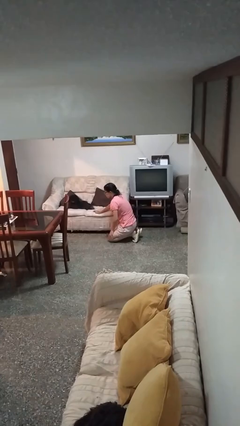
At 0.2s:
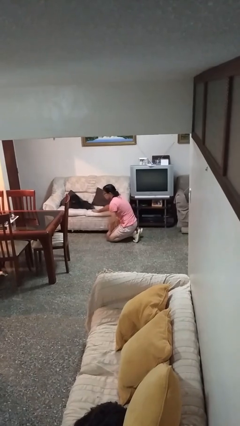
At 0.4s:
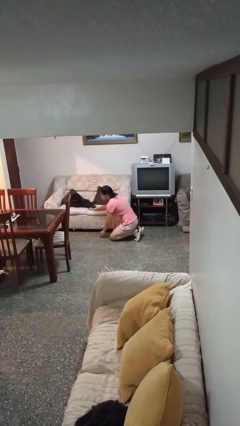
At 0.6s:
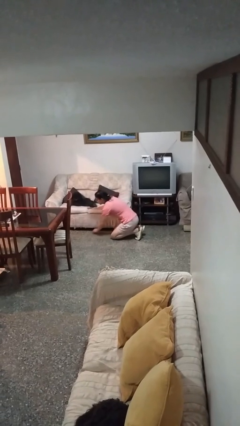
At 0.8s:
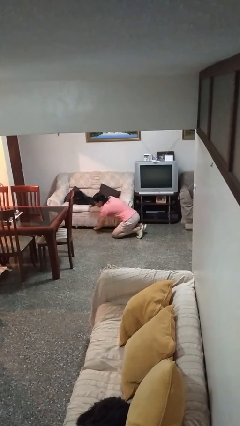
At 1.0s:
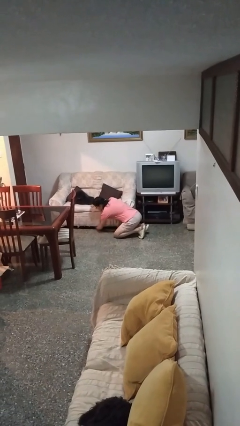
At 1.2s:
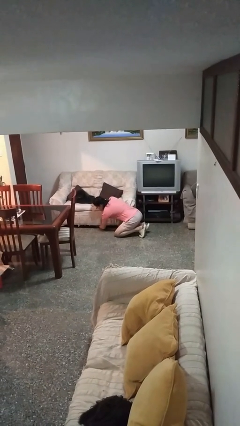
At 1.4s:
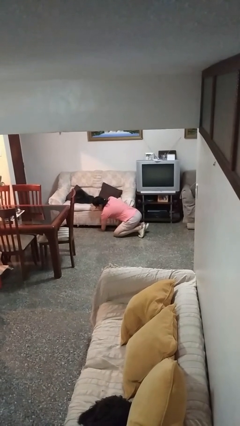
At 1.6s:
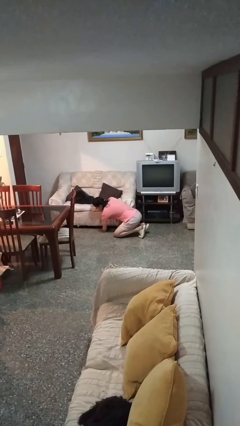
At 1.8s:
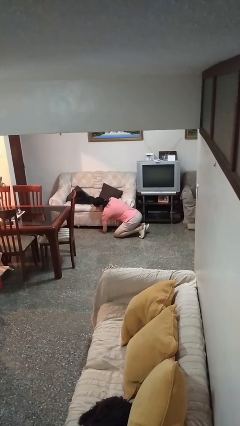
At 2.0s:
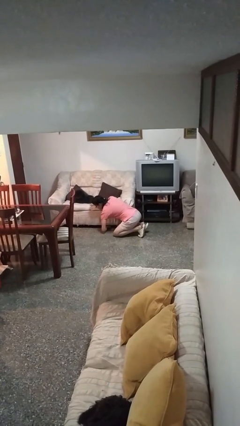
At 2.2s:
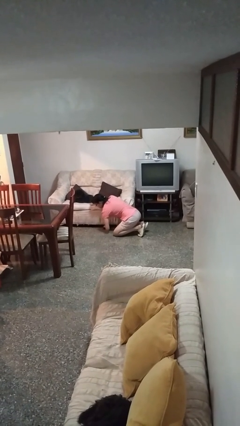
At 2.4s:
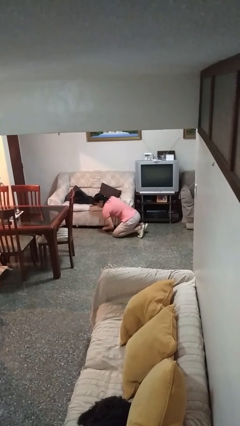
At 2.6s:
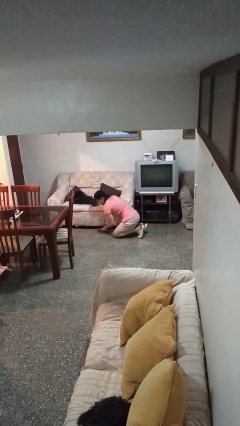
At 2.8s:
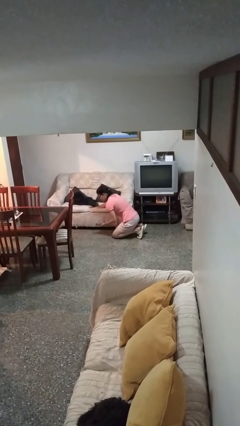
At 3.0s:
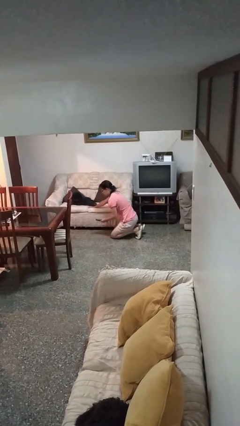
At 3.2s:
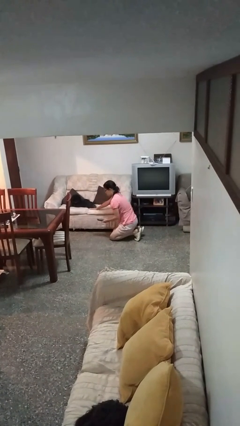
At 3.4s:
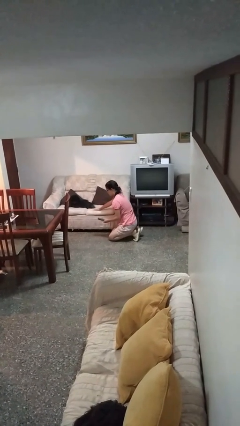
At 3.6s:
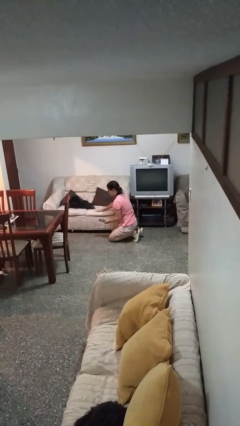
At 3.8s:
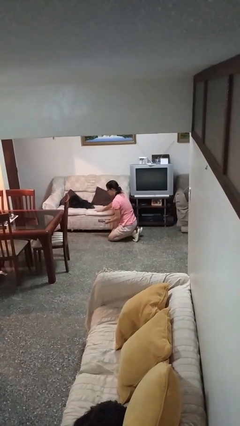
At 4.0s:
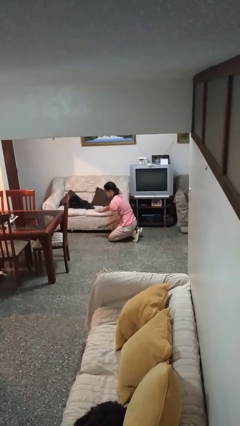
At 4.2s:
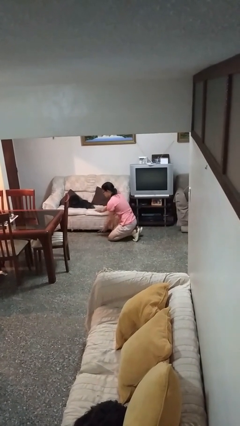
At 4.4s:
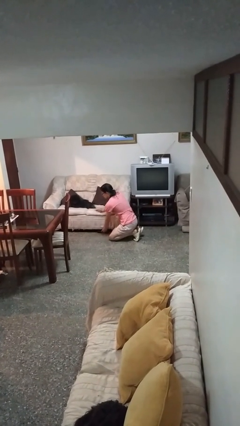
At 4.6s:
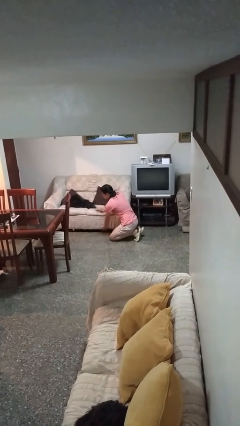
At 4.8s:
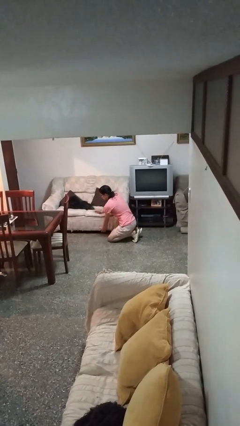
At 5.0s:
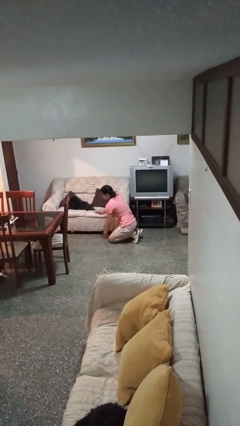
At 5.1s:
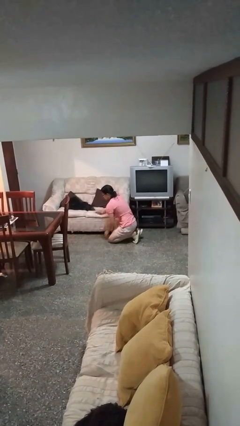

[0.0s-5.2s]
person searches under couch

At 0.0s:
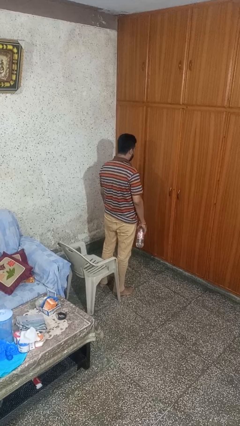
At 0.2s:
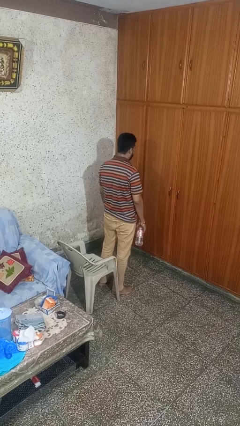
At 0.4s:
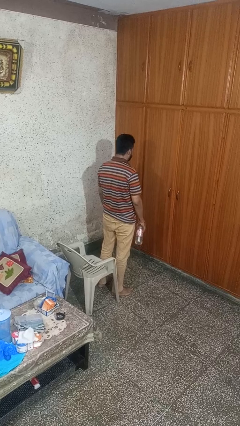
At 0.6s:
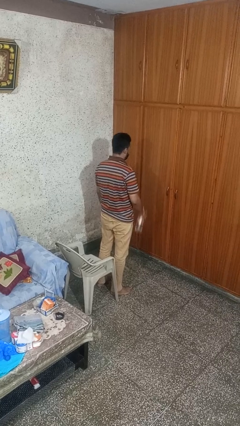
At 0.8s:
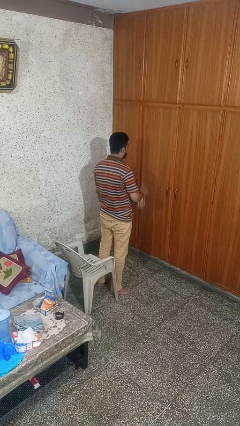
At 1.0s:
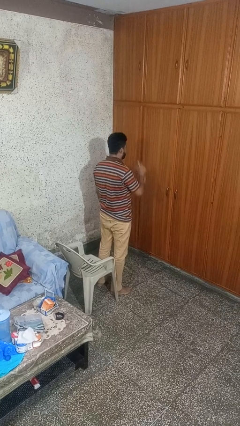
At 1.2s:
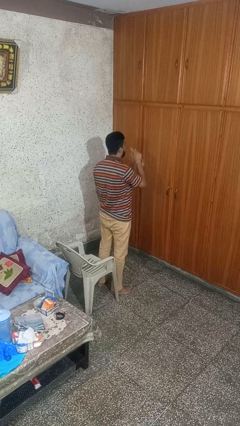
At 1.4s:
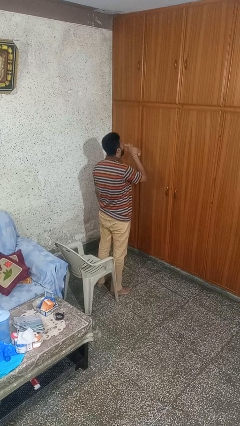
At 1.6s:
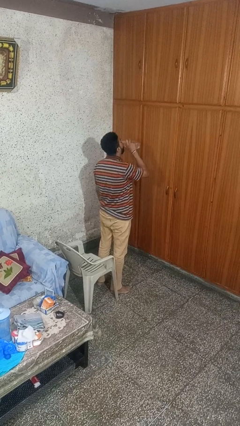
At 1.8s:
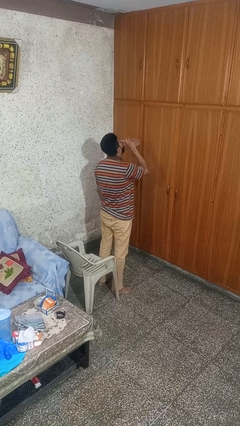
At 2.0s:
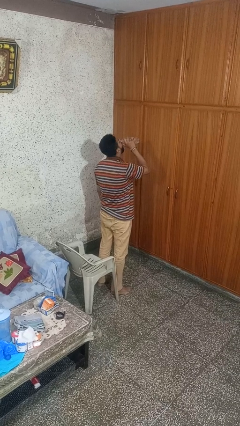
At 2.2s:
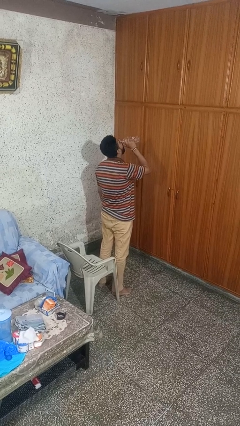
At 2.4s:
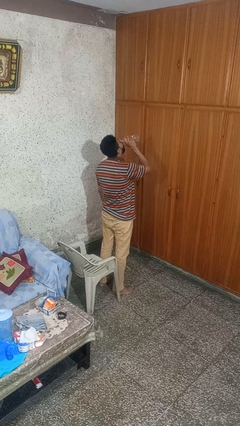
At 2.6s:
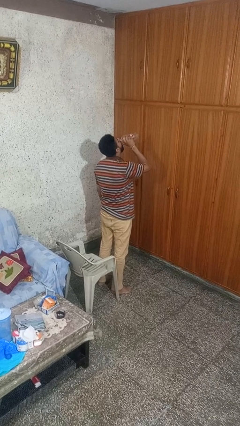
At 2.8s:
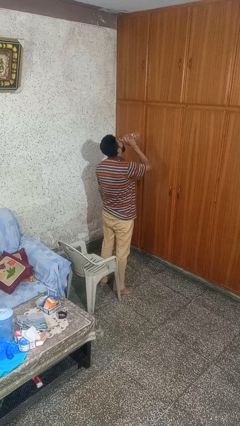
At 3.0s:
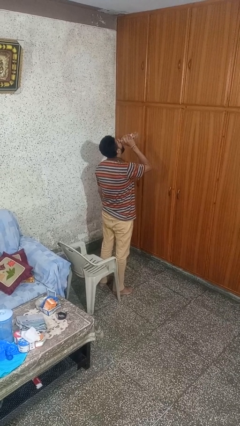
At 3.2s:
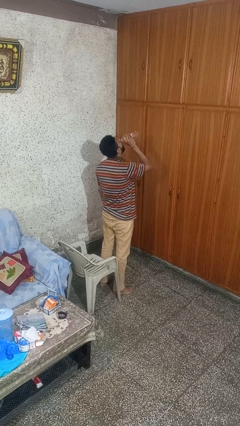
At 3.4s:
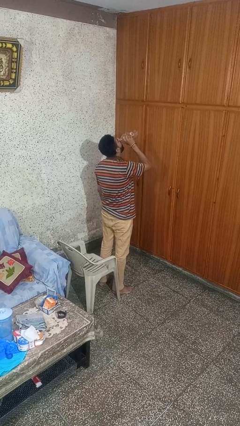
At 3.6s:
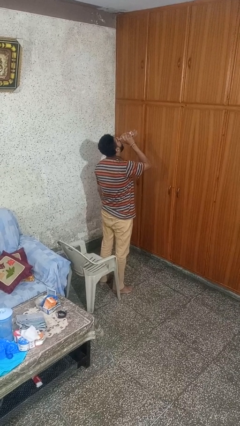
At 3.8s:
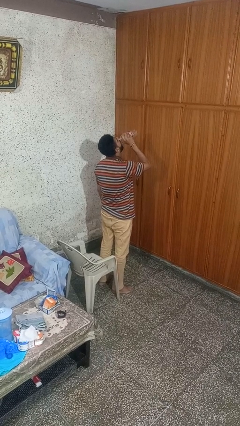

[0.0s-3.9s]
person drinks from bottle

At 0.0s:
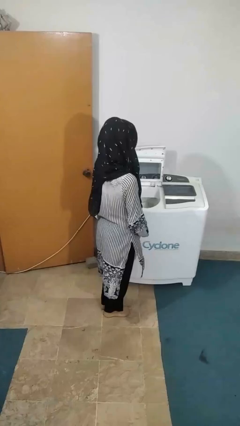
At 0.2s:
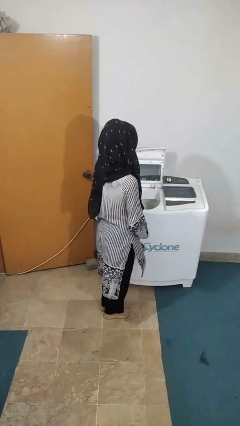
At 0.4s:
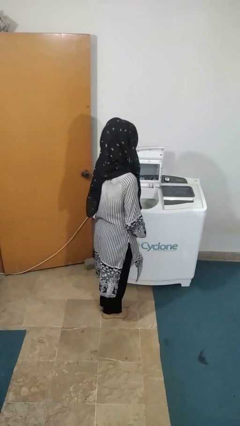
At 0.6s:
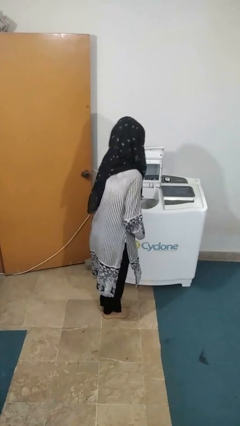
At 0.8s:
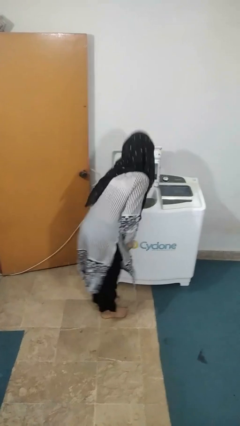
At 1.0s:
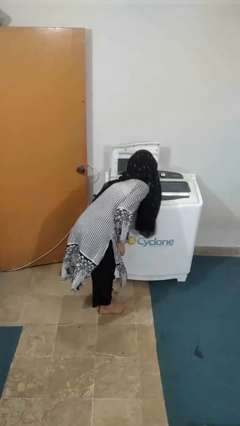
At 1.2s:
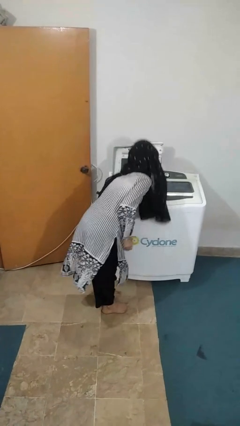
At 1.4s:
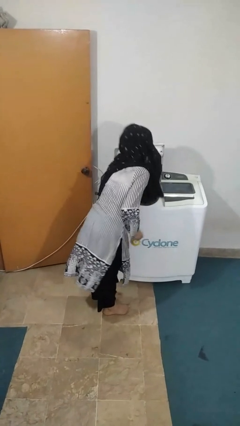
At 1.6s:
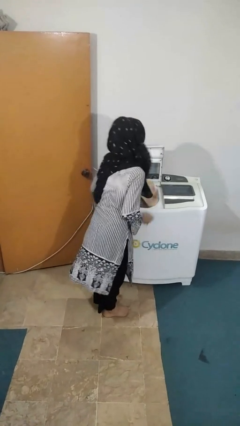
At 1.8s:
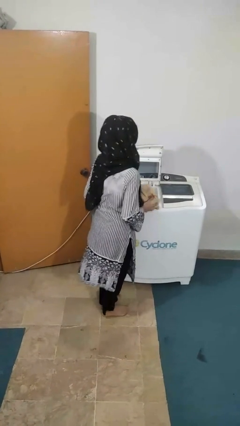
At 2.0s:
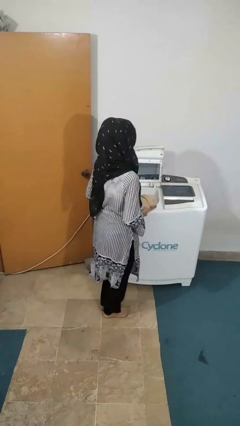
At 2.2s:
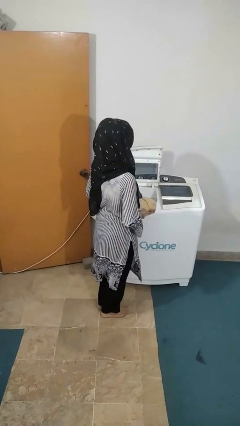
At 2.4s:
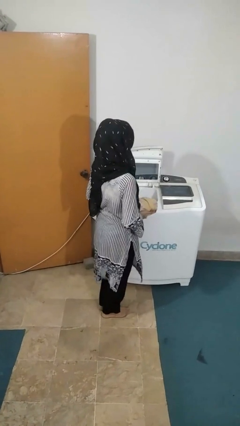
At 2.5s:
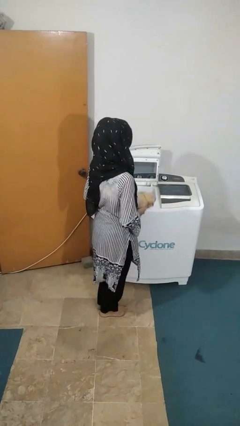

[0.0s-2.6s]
person unloads clotheswasher

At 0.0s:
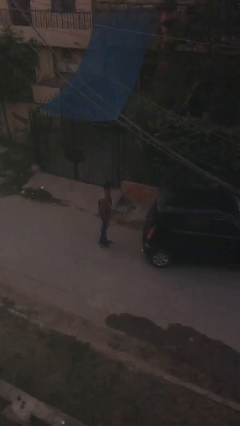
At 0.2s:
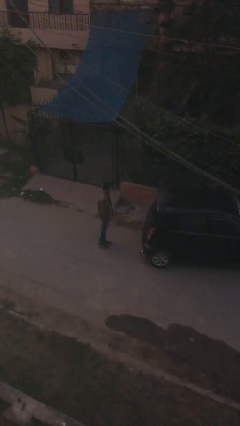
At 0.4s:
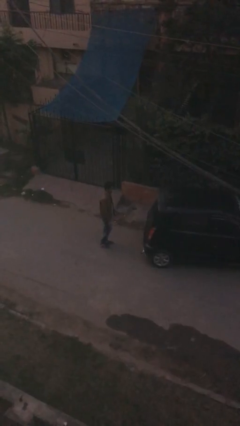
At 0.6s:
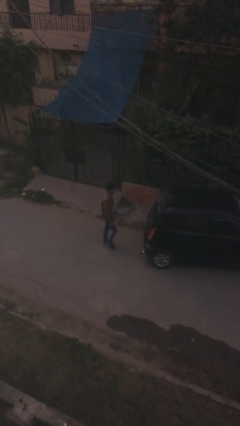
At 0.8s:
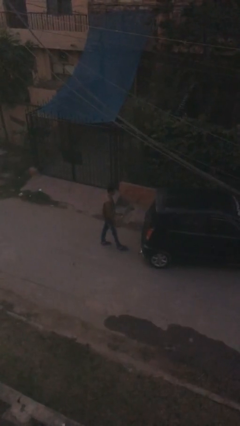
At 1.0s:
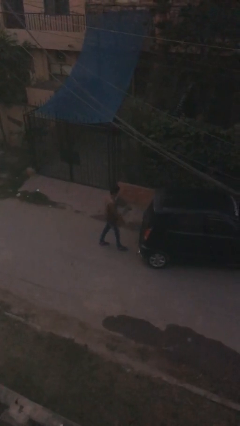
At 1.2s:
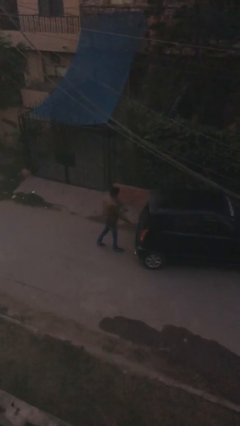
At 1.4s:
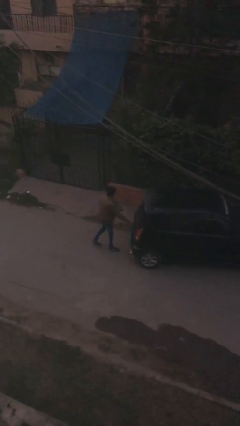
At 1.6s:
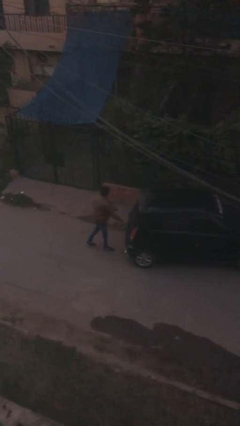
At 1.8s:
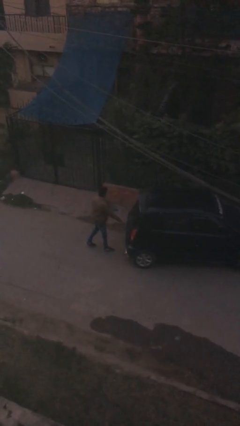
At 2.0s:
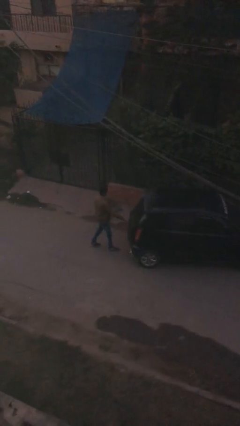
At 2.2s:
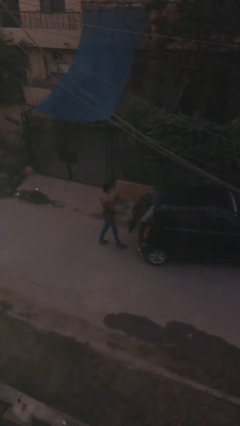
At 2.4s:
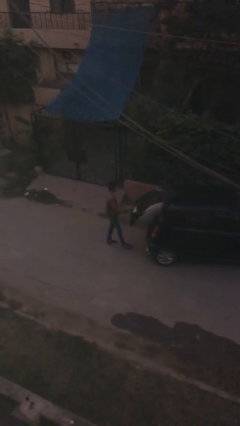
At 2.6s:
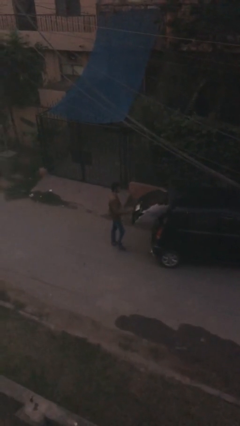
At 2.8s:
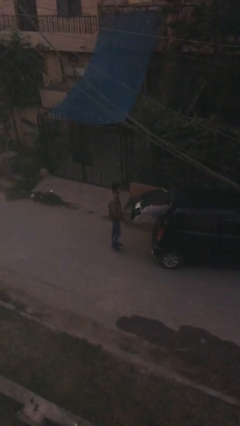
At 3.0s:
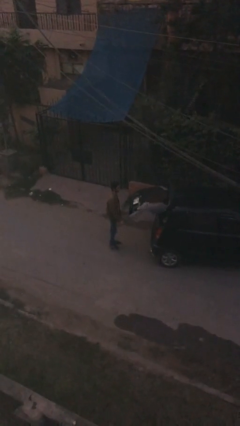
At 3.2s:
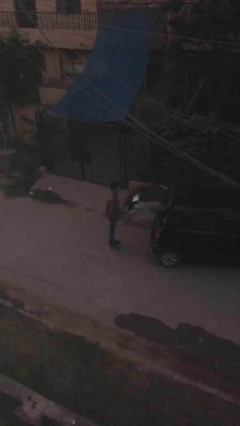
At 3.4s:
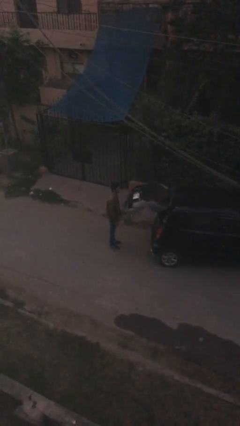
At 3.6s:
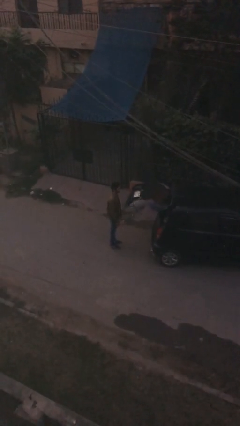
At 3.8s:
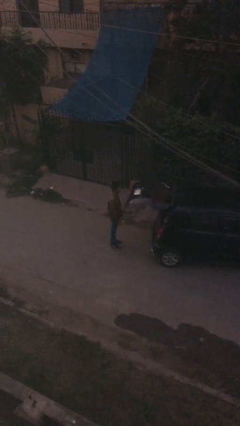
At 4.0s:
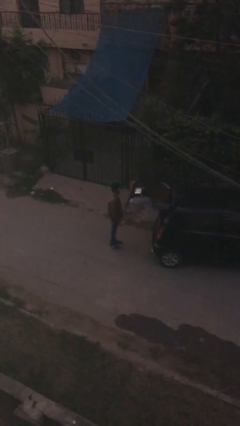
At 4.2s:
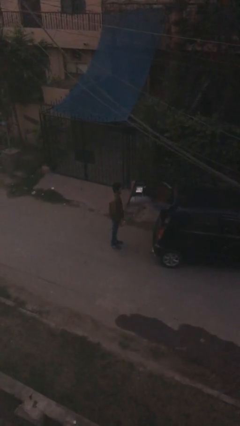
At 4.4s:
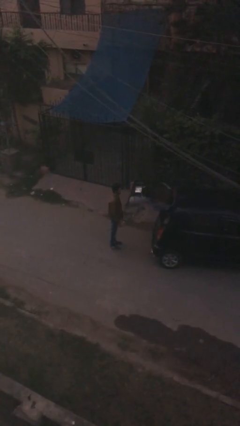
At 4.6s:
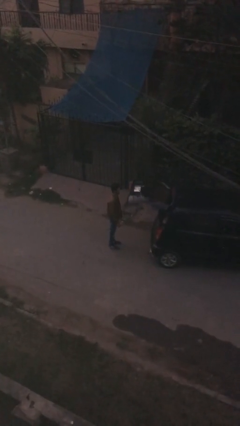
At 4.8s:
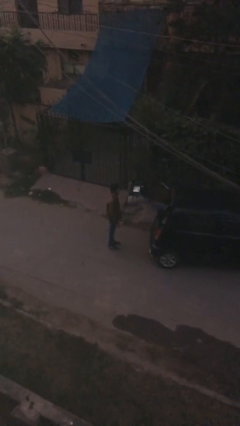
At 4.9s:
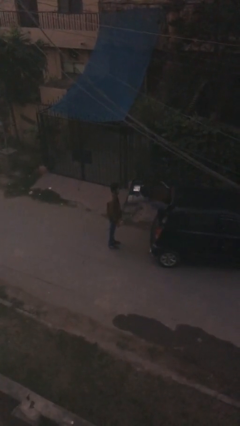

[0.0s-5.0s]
person opens car trunk

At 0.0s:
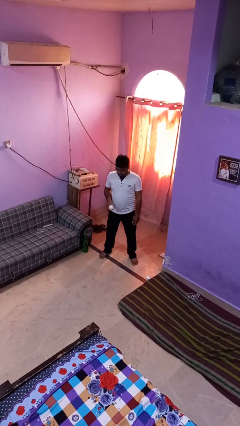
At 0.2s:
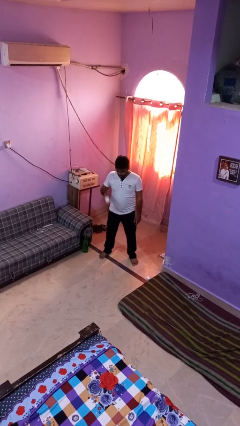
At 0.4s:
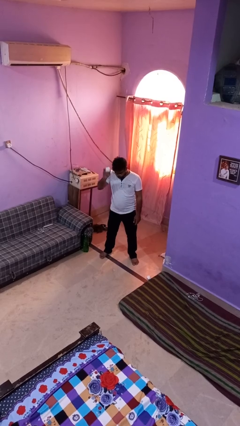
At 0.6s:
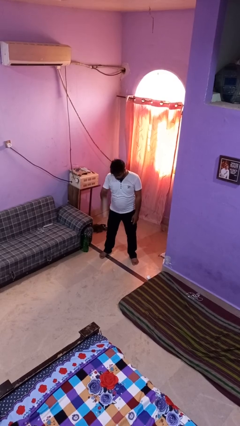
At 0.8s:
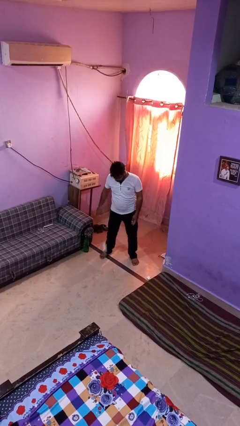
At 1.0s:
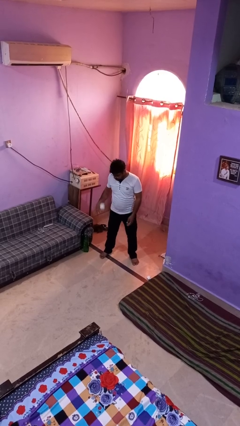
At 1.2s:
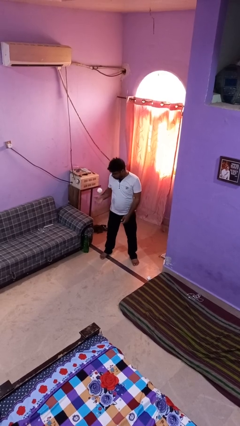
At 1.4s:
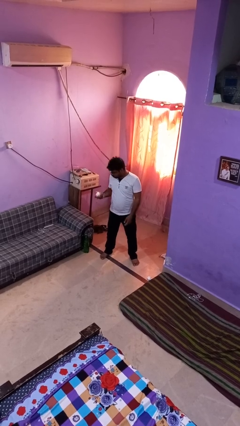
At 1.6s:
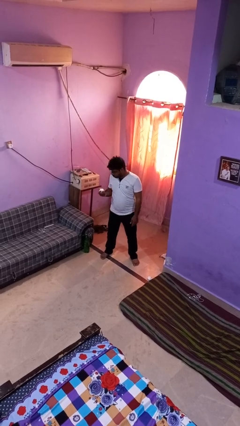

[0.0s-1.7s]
person bounces ball on floor
